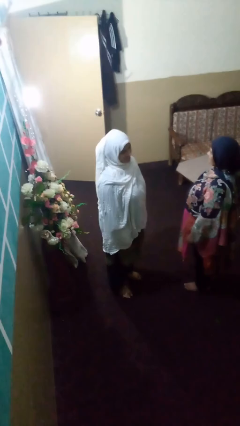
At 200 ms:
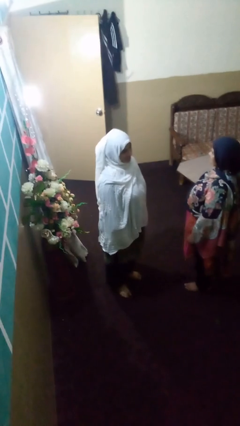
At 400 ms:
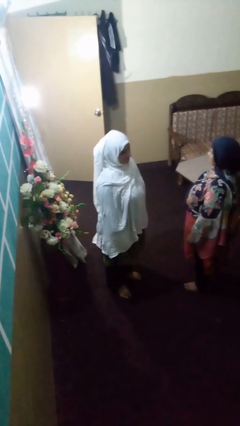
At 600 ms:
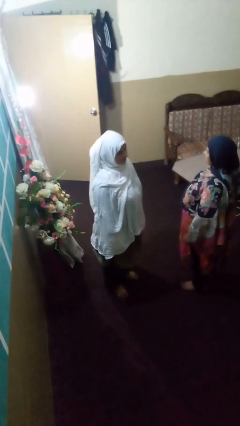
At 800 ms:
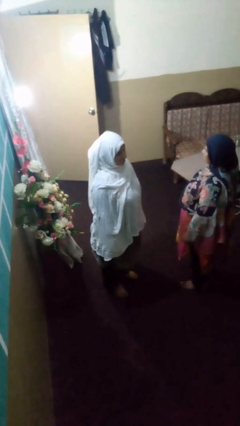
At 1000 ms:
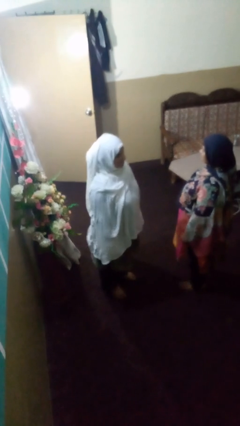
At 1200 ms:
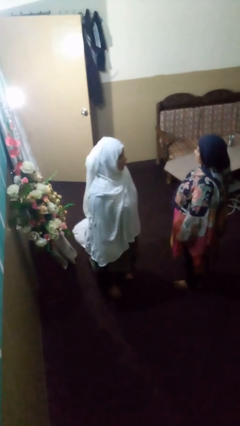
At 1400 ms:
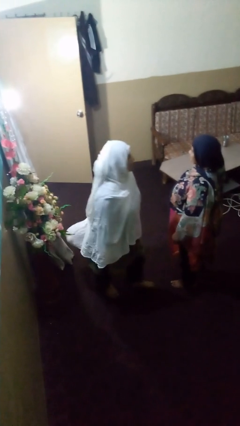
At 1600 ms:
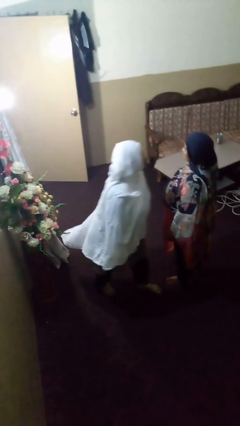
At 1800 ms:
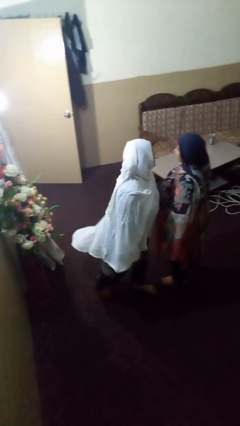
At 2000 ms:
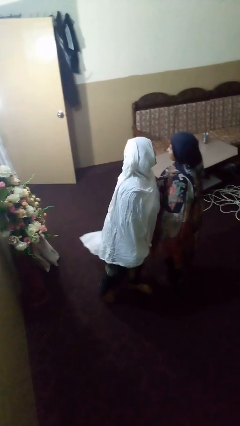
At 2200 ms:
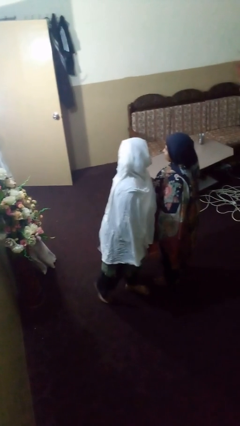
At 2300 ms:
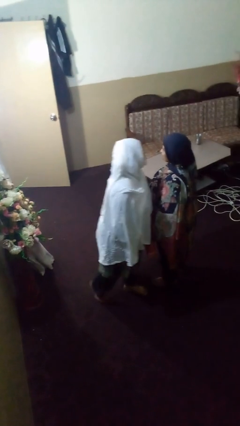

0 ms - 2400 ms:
person laughs with person

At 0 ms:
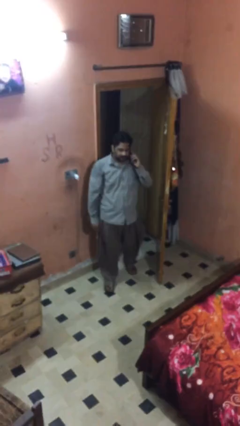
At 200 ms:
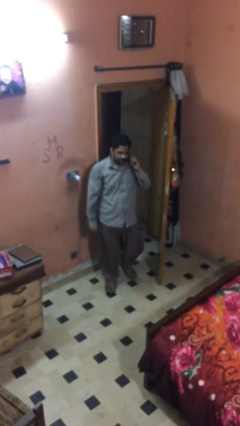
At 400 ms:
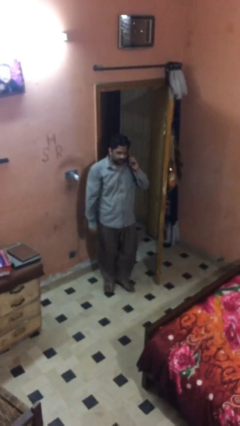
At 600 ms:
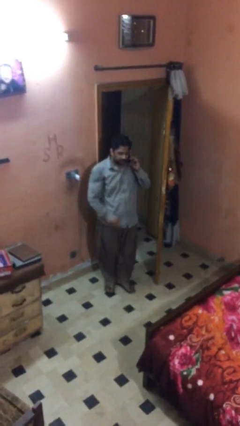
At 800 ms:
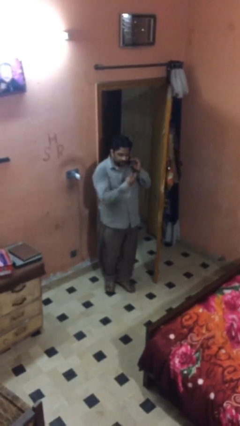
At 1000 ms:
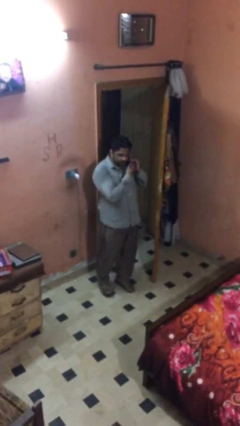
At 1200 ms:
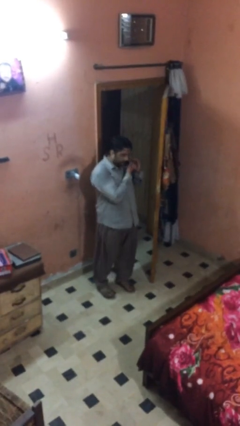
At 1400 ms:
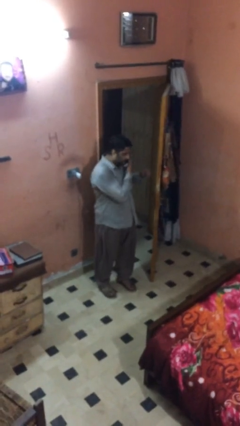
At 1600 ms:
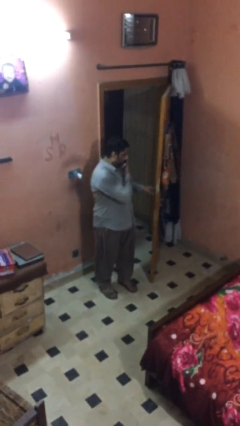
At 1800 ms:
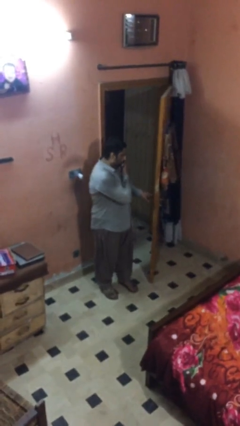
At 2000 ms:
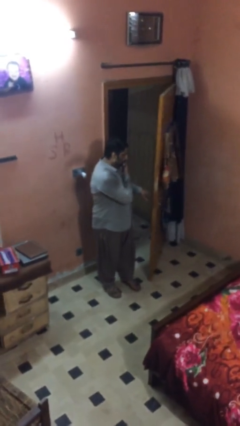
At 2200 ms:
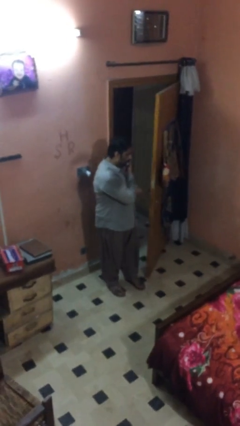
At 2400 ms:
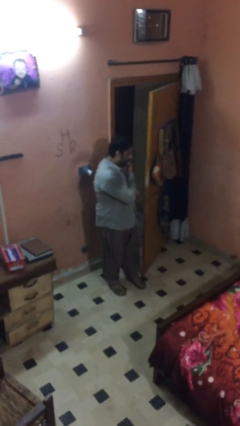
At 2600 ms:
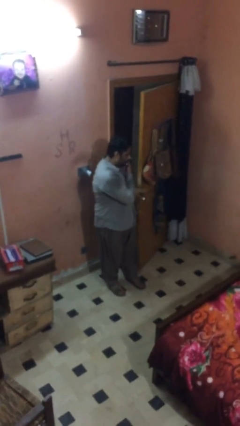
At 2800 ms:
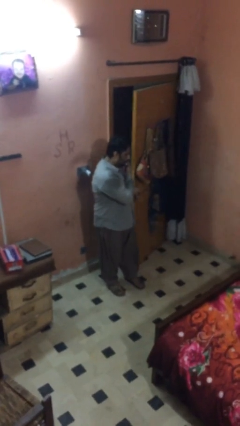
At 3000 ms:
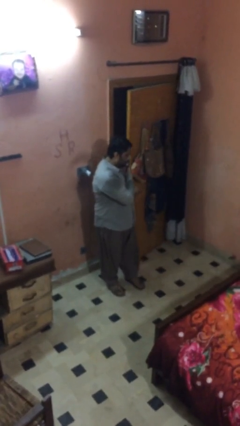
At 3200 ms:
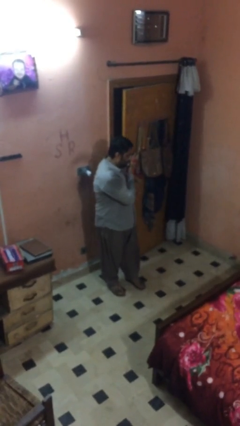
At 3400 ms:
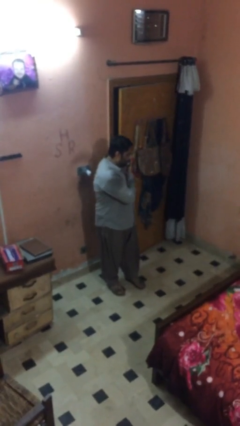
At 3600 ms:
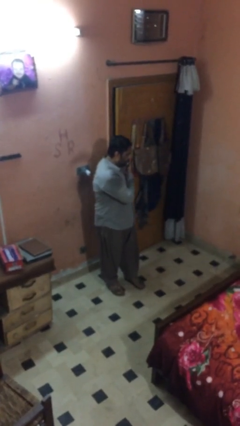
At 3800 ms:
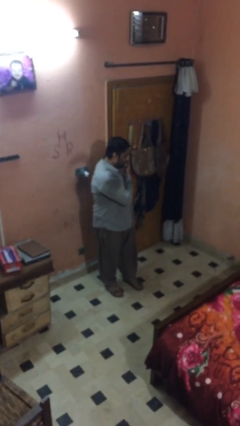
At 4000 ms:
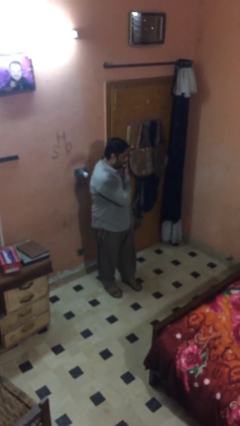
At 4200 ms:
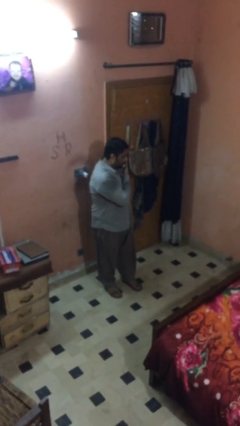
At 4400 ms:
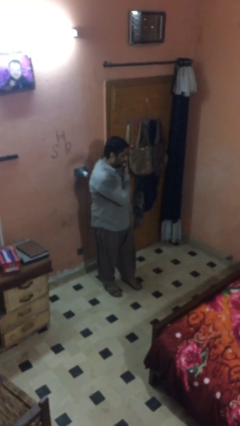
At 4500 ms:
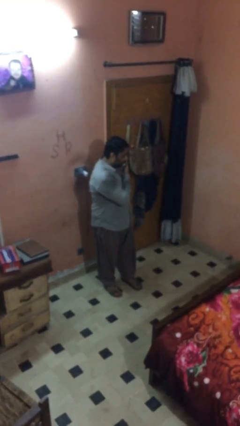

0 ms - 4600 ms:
person closes facility door

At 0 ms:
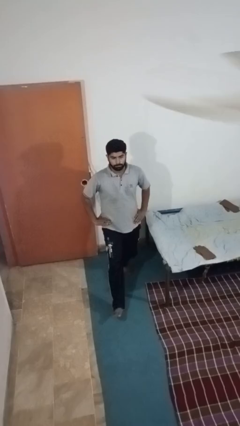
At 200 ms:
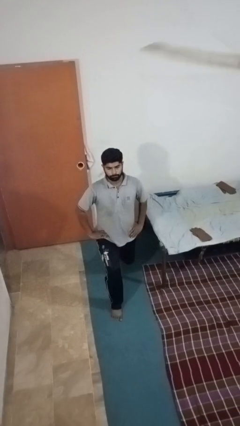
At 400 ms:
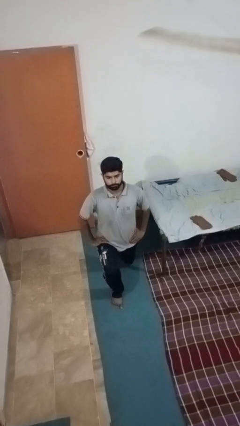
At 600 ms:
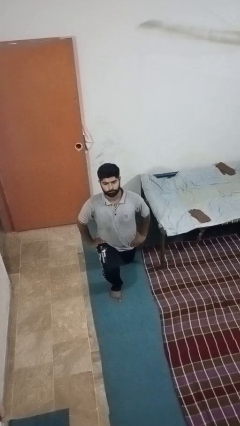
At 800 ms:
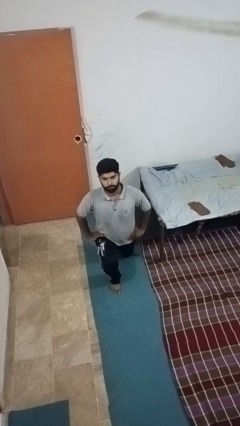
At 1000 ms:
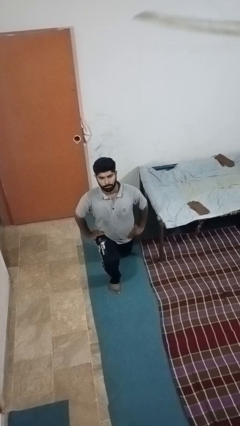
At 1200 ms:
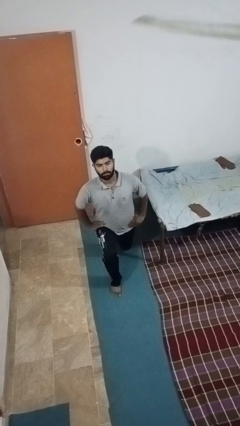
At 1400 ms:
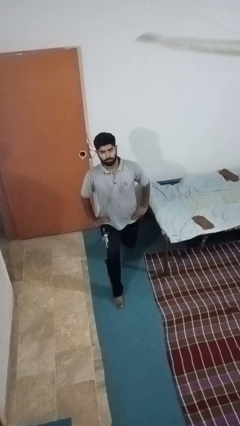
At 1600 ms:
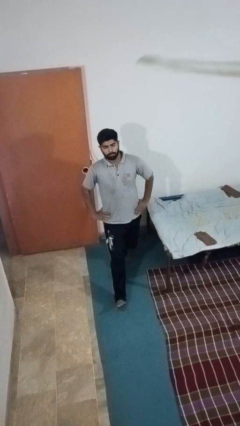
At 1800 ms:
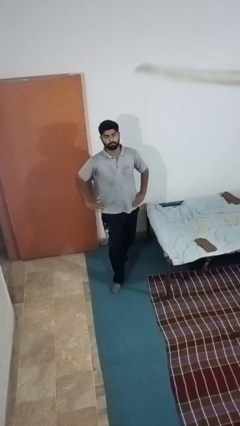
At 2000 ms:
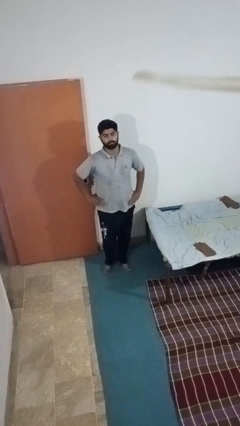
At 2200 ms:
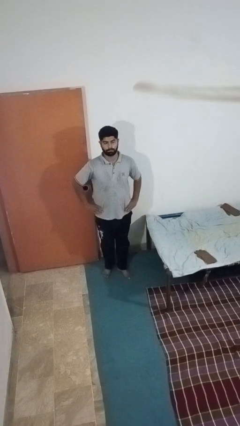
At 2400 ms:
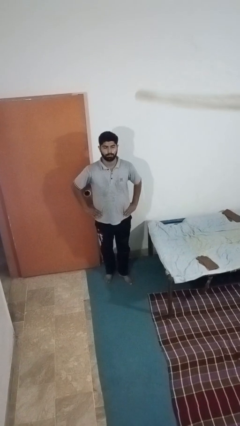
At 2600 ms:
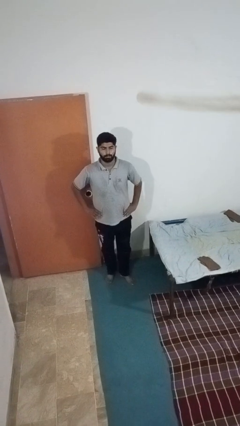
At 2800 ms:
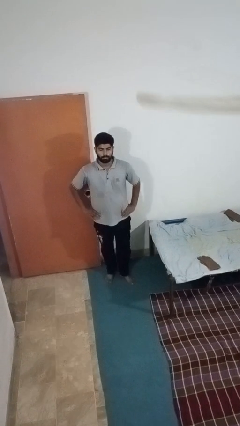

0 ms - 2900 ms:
person exercises with lunges

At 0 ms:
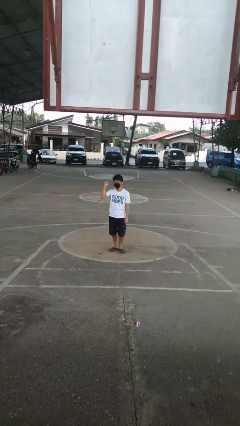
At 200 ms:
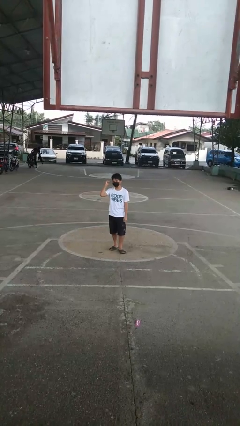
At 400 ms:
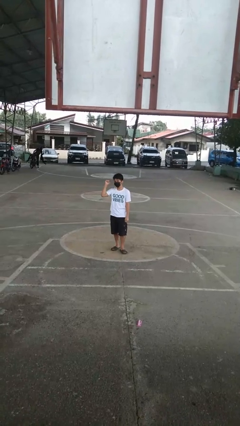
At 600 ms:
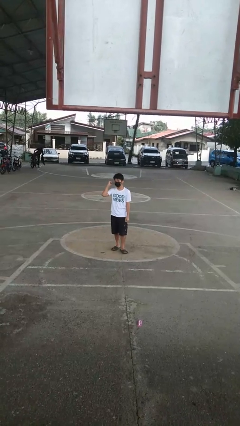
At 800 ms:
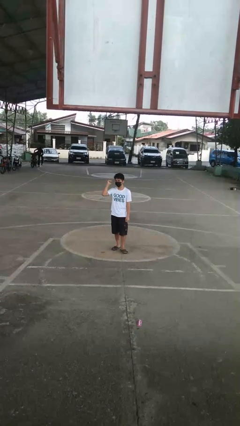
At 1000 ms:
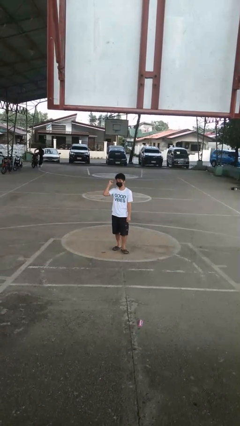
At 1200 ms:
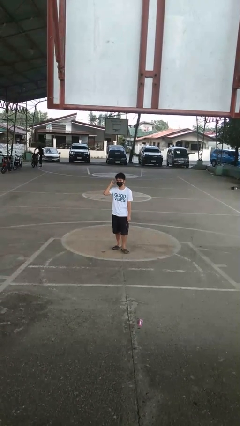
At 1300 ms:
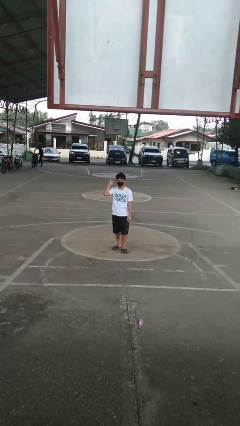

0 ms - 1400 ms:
person gestures behind me

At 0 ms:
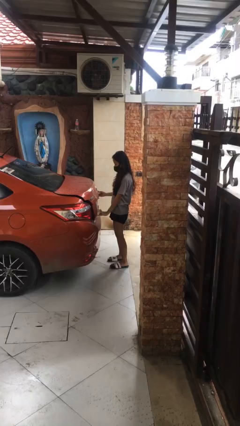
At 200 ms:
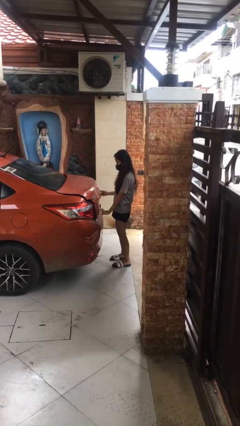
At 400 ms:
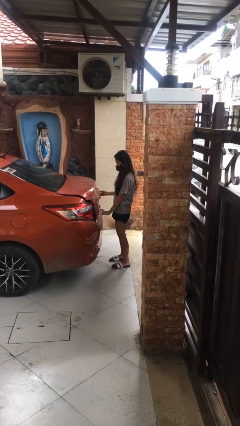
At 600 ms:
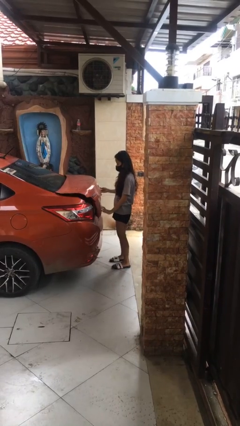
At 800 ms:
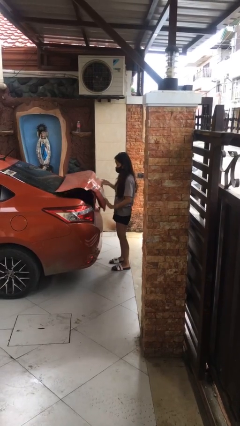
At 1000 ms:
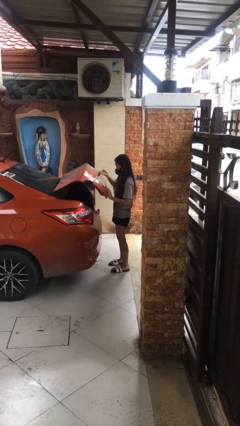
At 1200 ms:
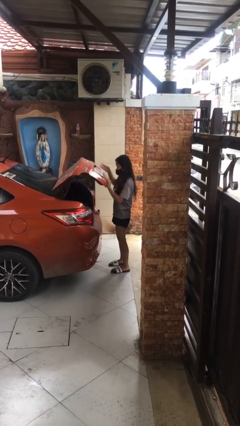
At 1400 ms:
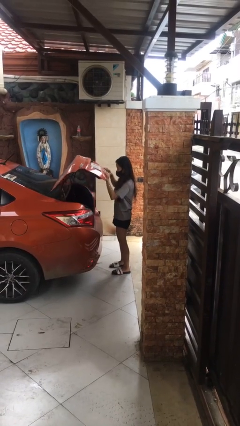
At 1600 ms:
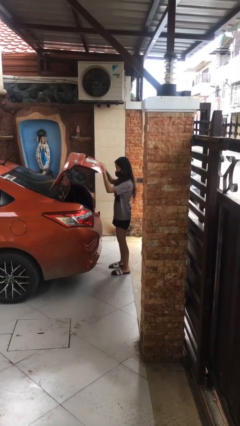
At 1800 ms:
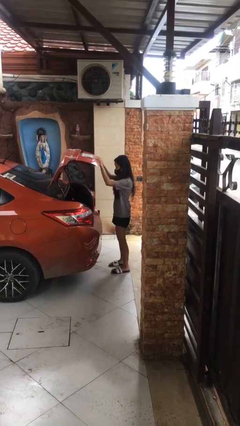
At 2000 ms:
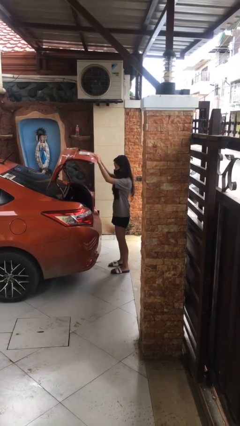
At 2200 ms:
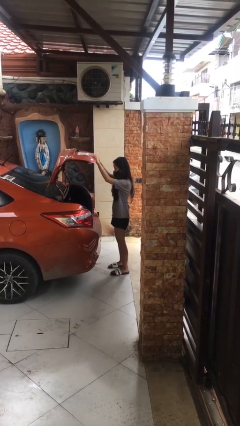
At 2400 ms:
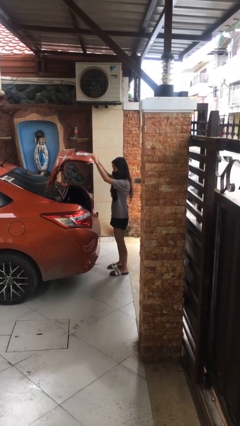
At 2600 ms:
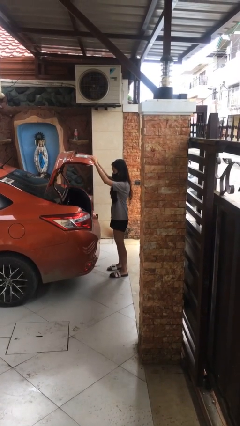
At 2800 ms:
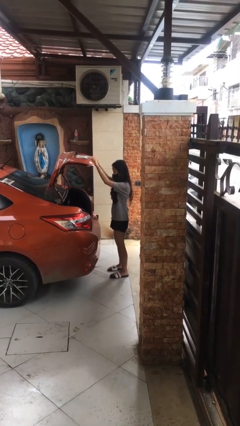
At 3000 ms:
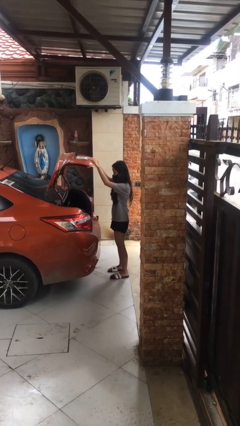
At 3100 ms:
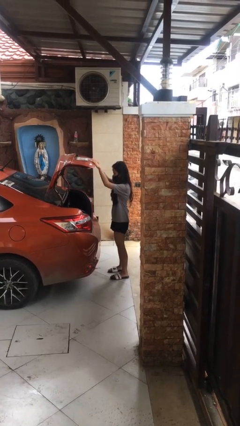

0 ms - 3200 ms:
person opens car trunk

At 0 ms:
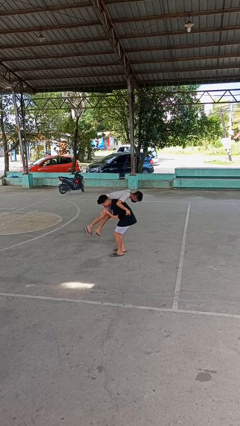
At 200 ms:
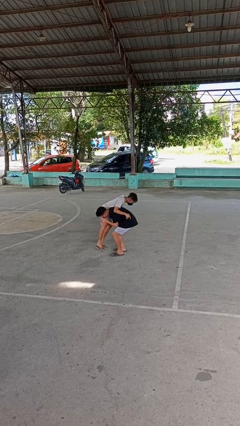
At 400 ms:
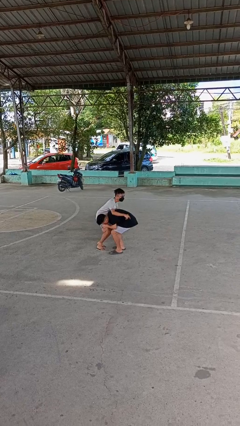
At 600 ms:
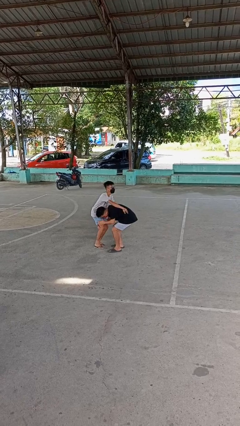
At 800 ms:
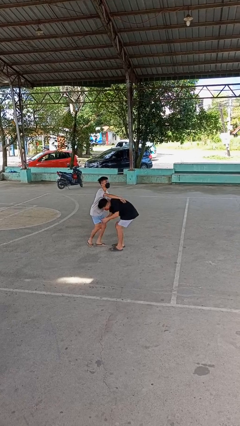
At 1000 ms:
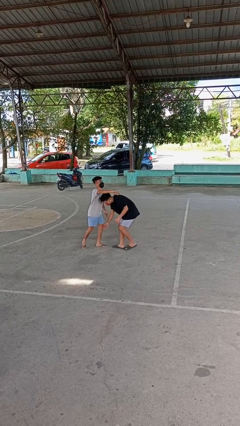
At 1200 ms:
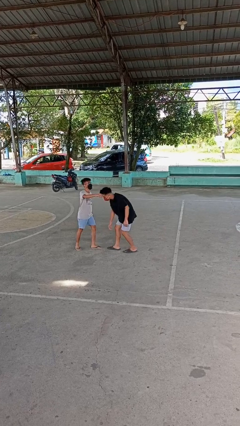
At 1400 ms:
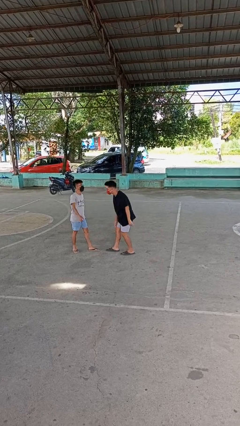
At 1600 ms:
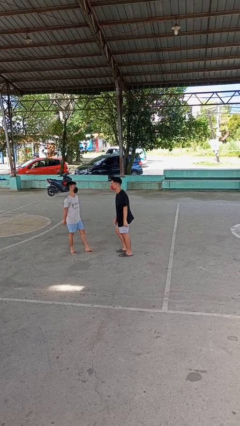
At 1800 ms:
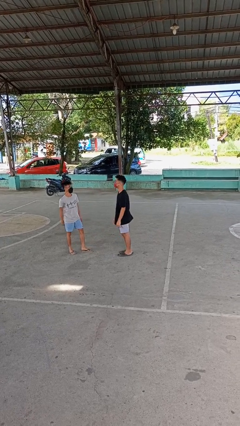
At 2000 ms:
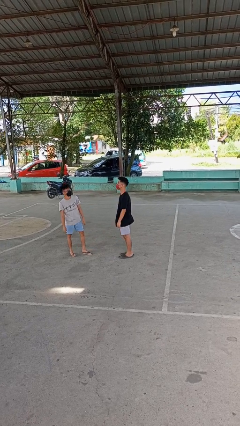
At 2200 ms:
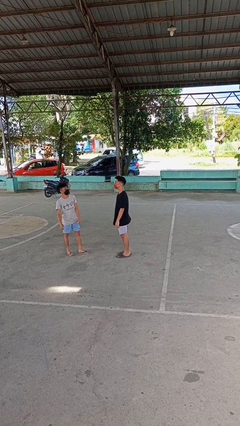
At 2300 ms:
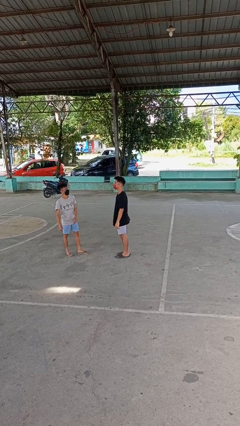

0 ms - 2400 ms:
person puts down person

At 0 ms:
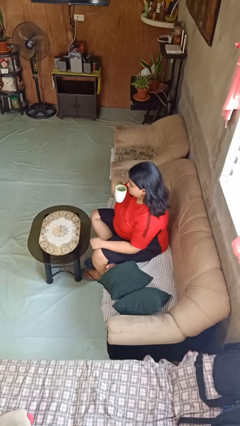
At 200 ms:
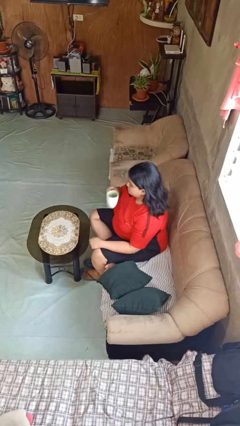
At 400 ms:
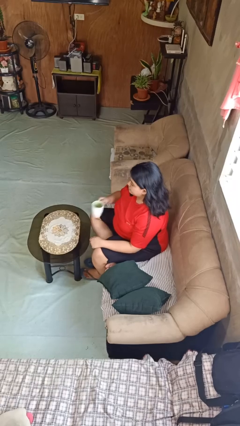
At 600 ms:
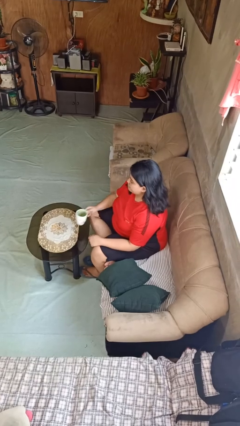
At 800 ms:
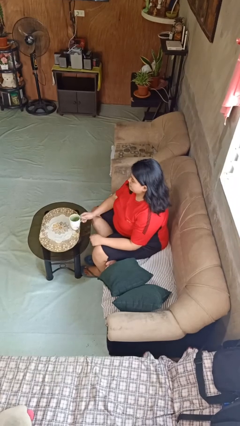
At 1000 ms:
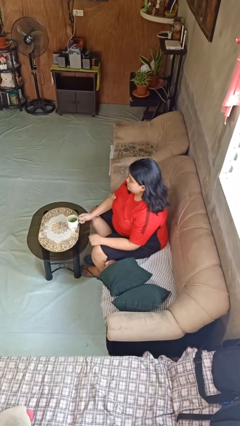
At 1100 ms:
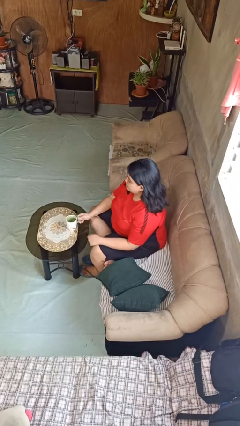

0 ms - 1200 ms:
person puts down object on table
